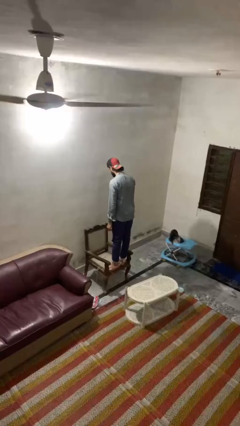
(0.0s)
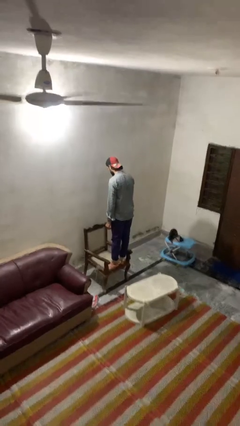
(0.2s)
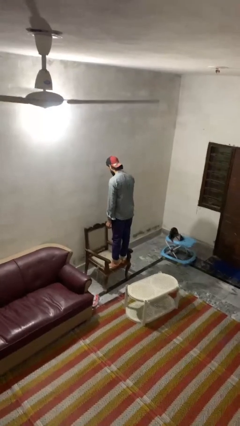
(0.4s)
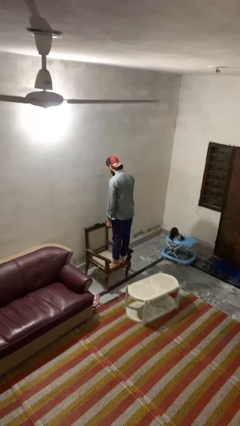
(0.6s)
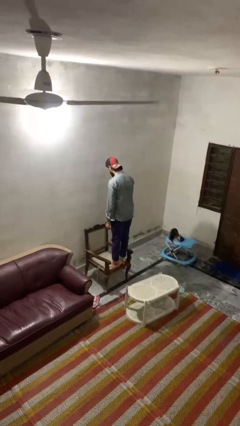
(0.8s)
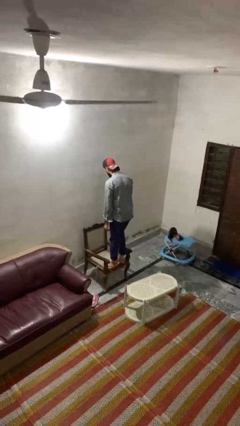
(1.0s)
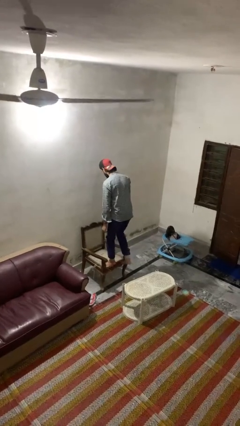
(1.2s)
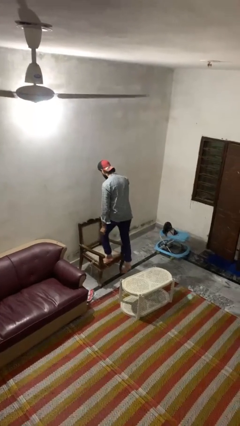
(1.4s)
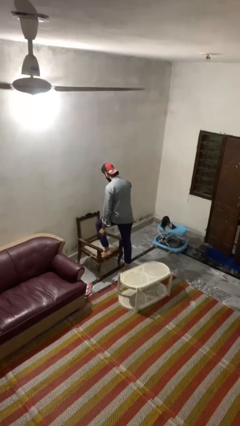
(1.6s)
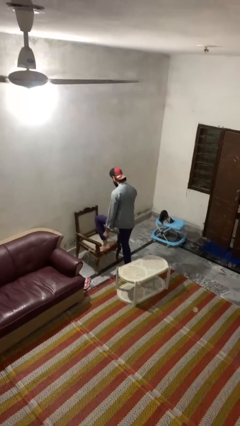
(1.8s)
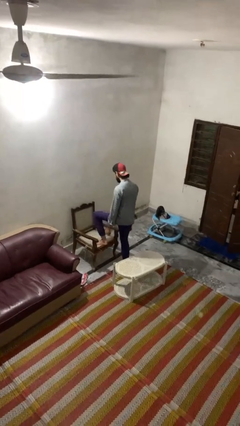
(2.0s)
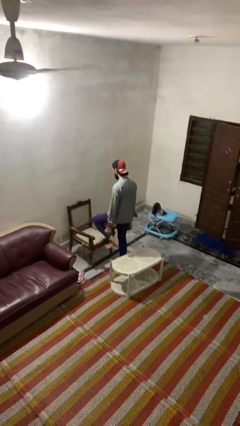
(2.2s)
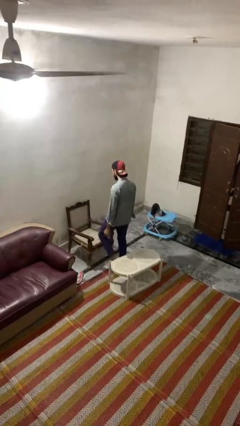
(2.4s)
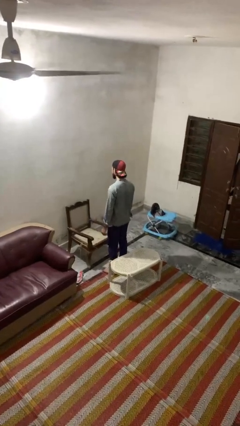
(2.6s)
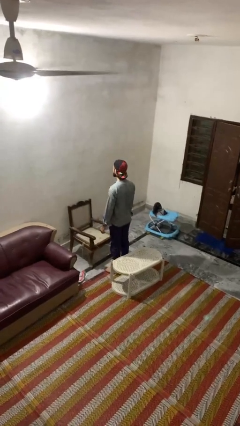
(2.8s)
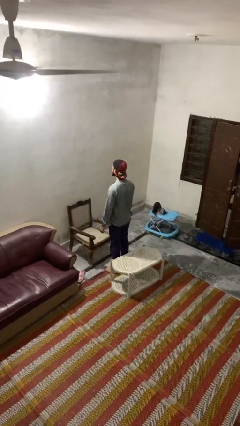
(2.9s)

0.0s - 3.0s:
person climbs off chair

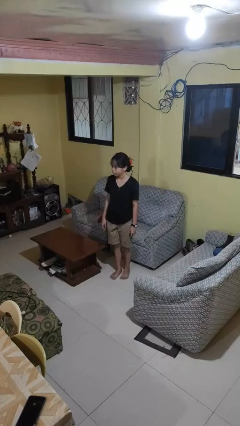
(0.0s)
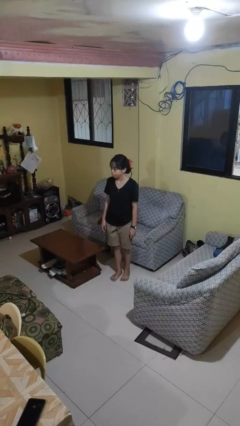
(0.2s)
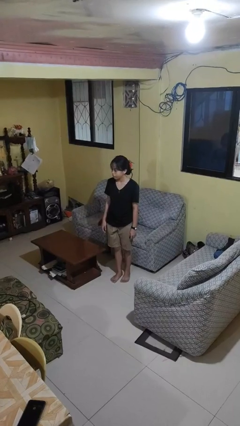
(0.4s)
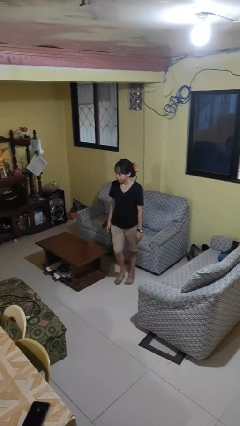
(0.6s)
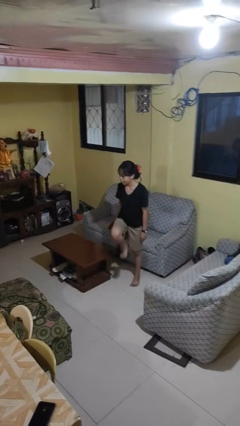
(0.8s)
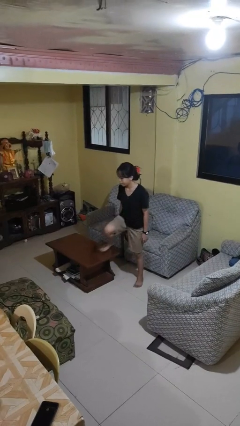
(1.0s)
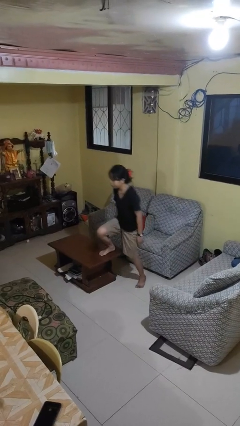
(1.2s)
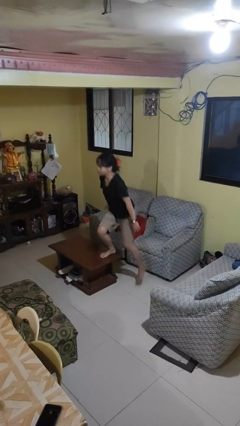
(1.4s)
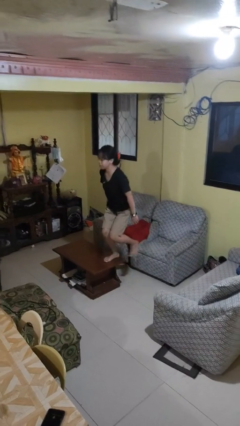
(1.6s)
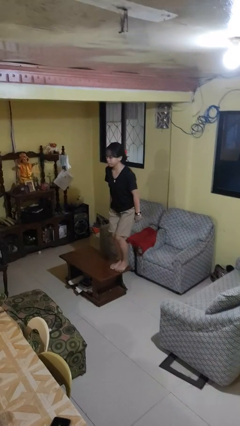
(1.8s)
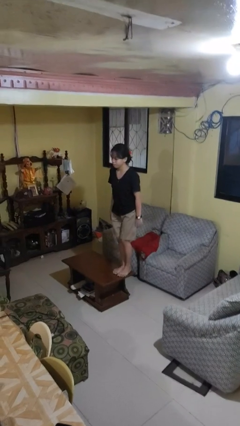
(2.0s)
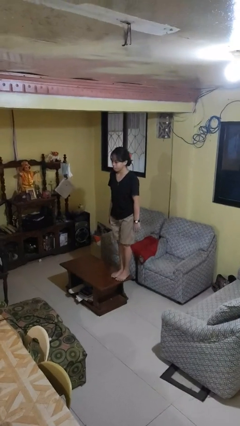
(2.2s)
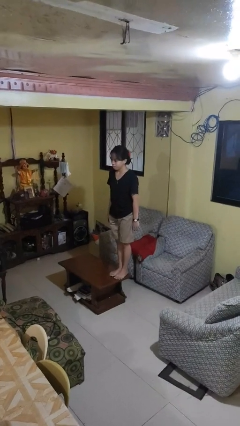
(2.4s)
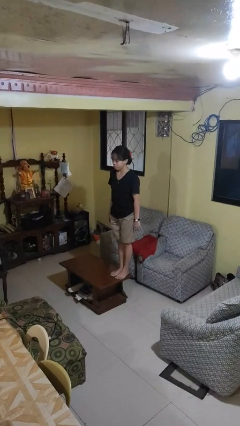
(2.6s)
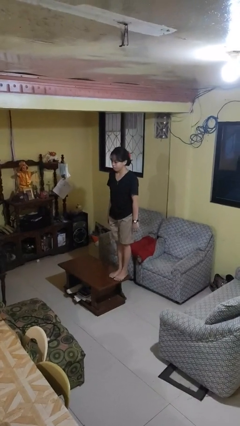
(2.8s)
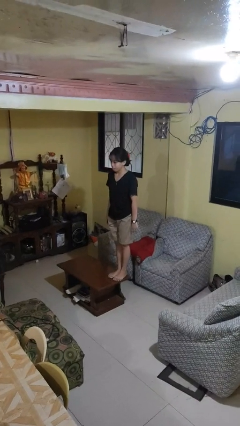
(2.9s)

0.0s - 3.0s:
person climbs on table

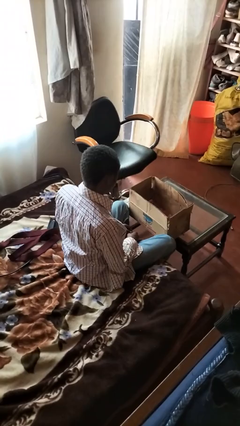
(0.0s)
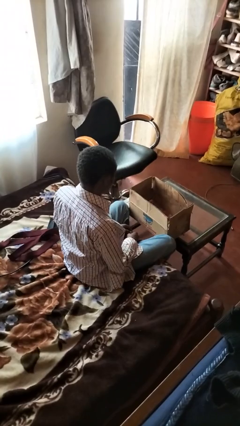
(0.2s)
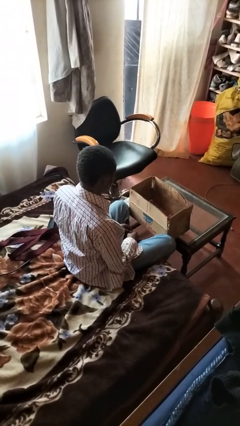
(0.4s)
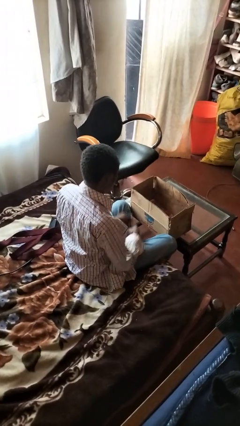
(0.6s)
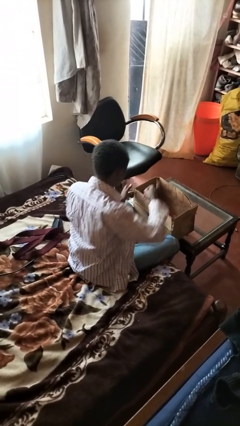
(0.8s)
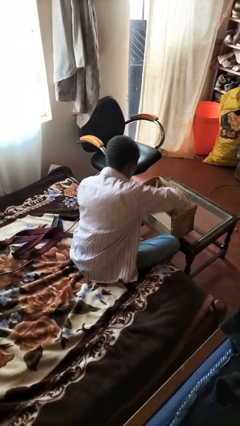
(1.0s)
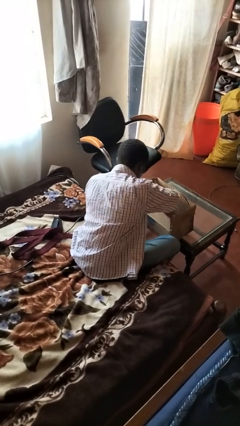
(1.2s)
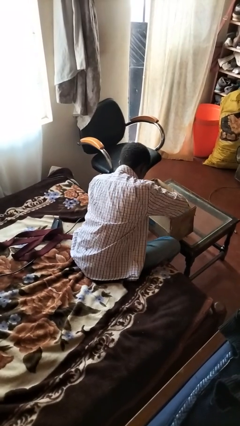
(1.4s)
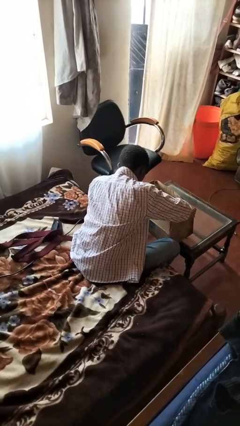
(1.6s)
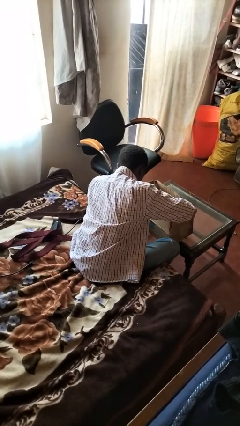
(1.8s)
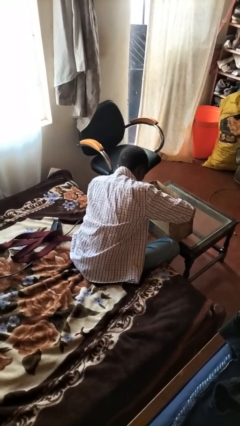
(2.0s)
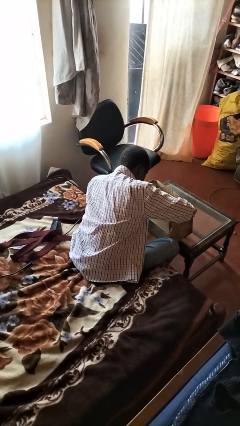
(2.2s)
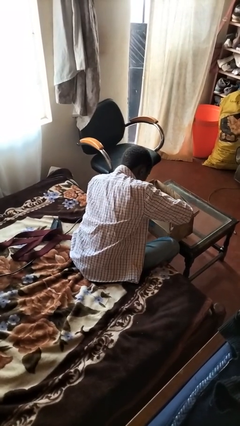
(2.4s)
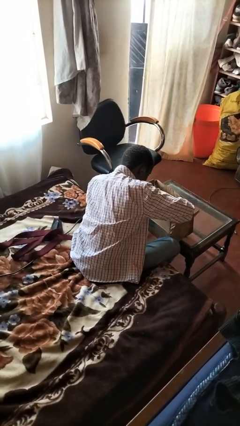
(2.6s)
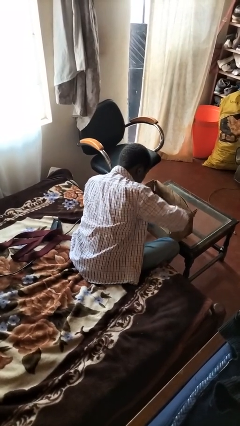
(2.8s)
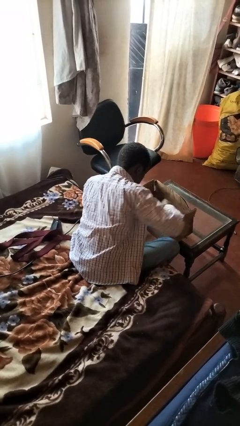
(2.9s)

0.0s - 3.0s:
person searches in box

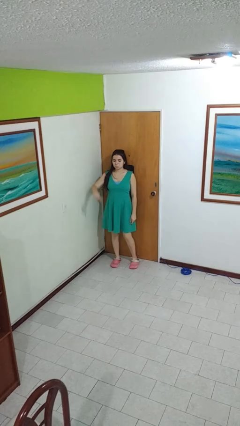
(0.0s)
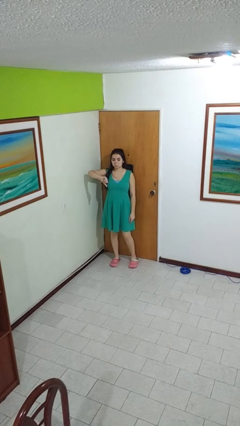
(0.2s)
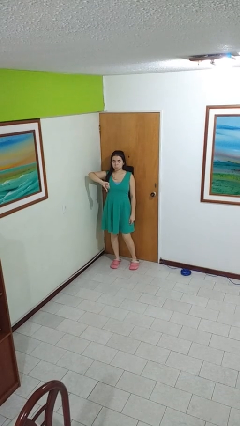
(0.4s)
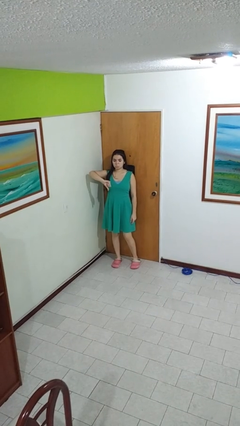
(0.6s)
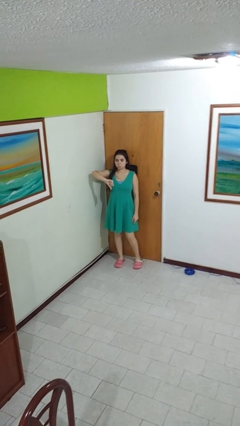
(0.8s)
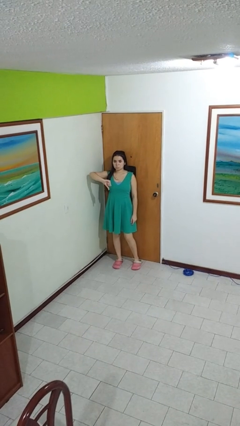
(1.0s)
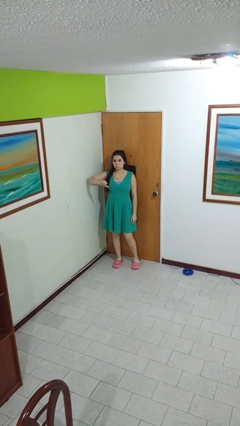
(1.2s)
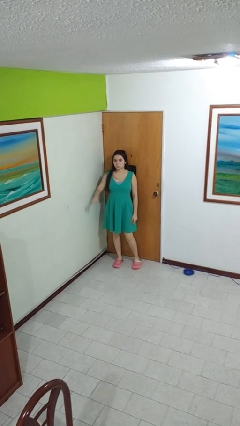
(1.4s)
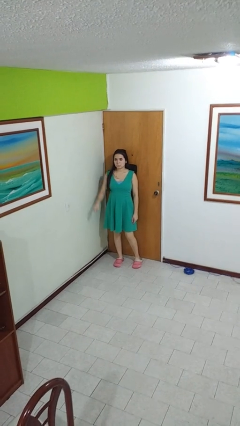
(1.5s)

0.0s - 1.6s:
person gestures thumbs down

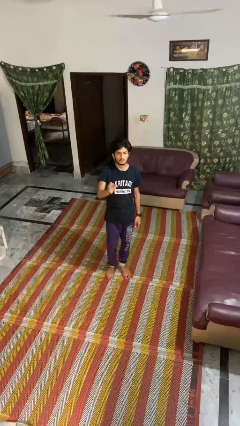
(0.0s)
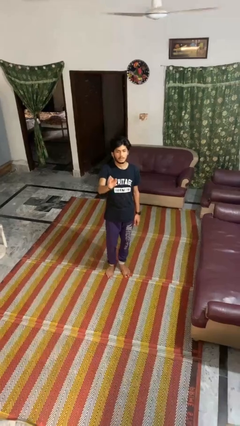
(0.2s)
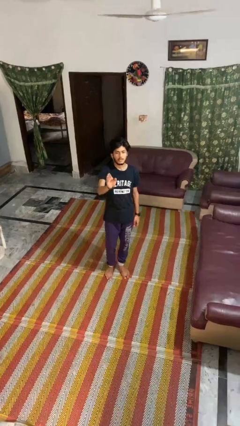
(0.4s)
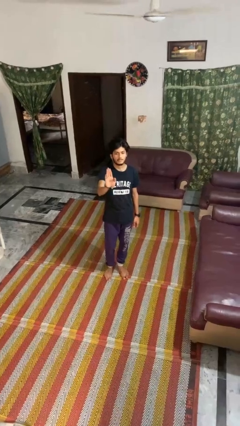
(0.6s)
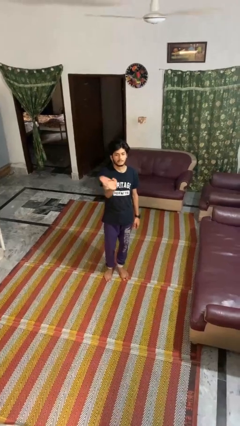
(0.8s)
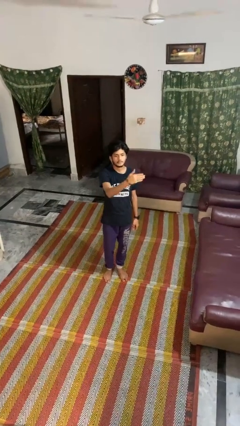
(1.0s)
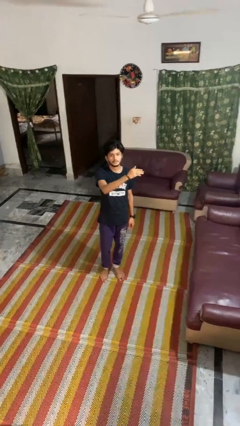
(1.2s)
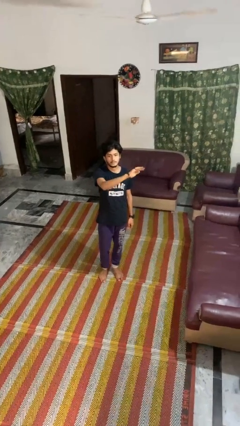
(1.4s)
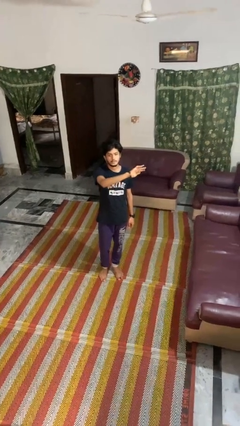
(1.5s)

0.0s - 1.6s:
person gestures swipe left

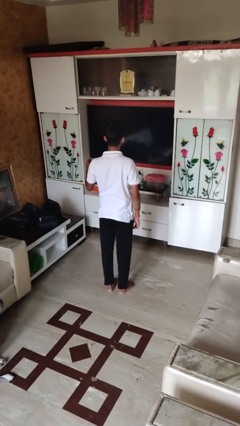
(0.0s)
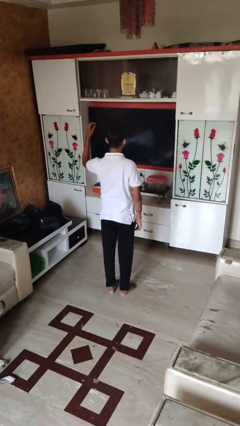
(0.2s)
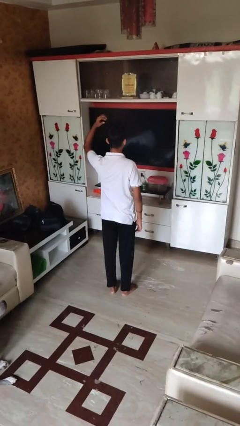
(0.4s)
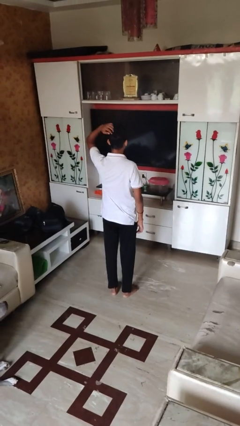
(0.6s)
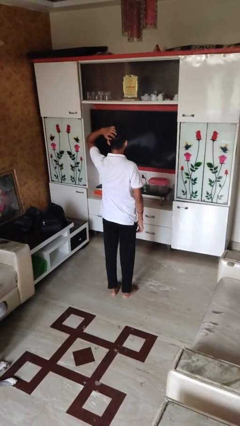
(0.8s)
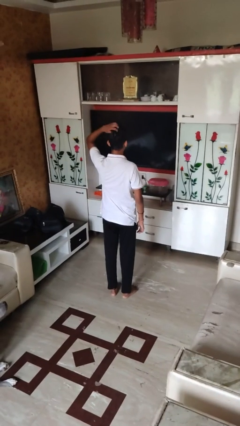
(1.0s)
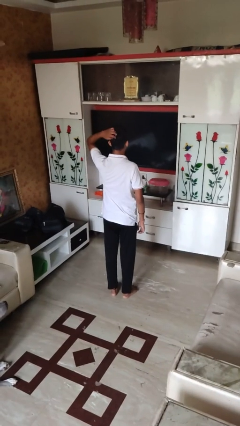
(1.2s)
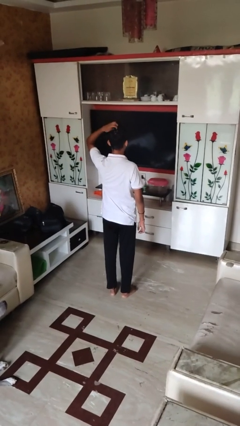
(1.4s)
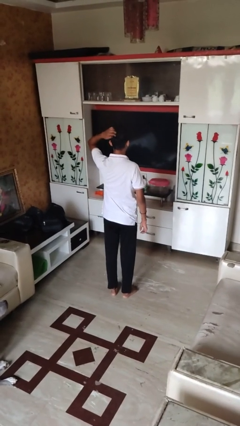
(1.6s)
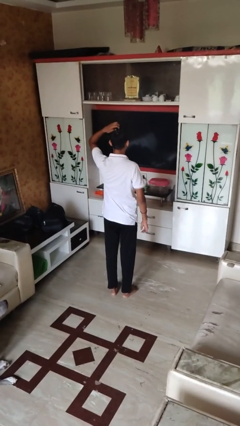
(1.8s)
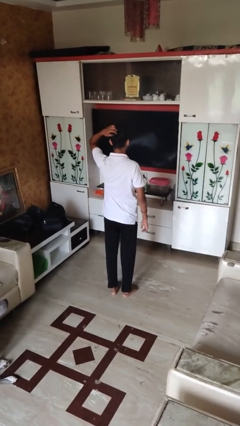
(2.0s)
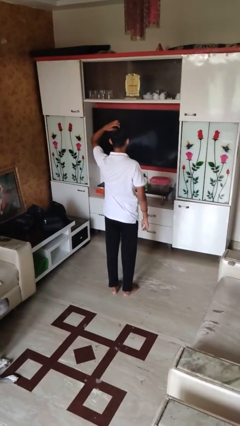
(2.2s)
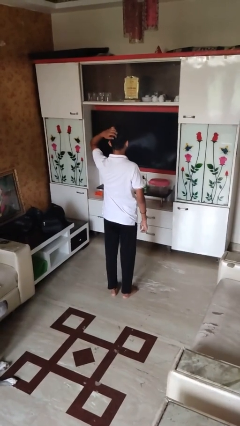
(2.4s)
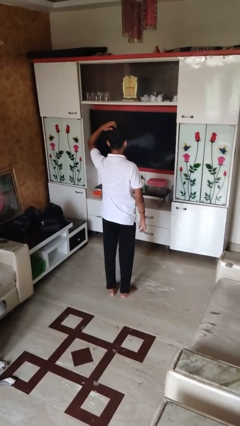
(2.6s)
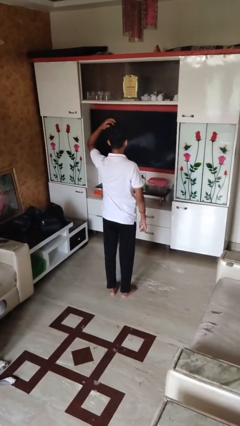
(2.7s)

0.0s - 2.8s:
person scratches face

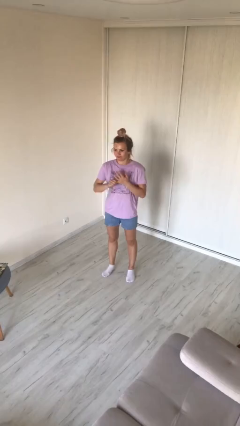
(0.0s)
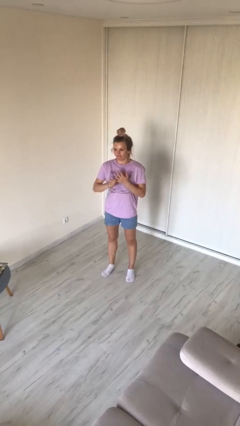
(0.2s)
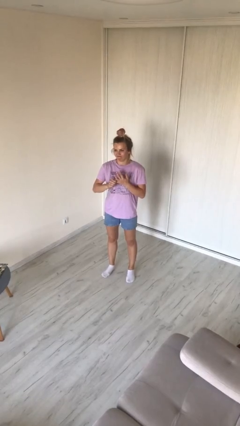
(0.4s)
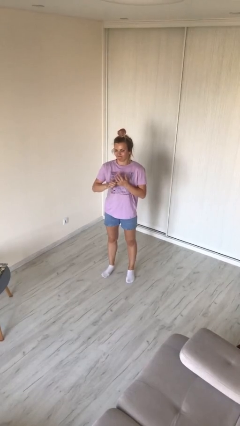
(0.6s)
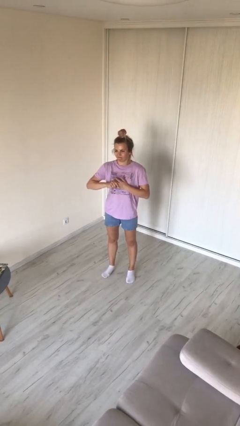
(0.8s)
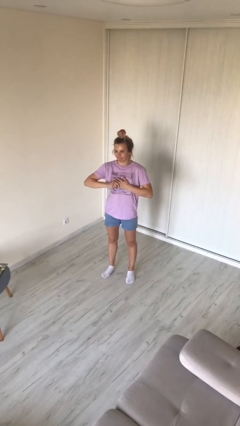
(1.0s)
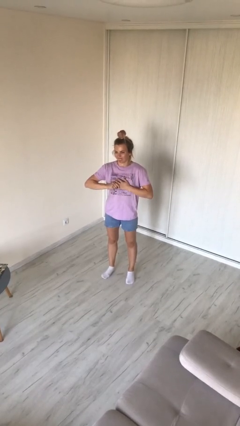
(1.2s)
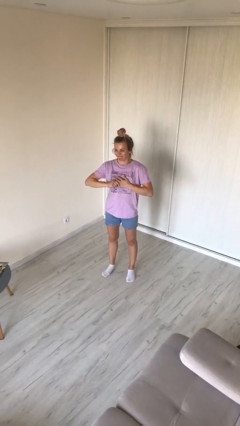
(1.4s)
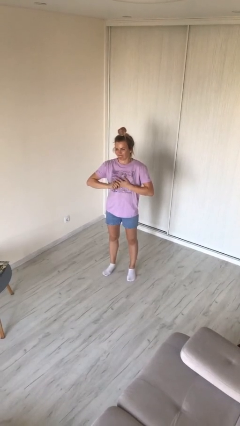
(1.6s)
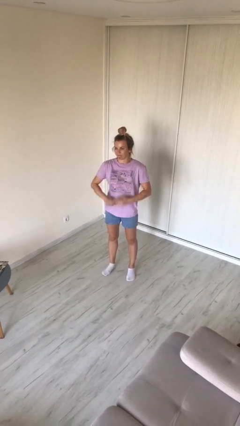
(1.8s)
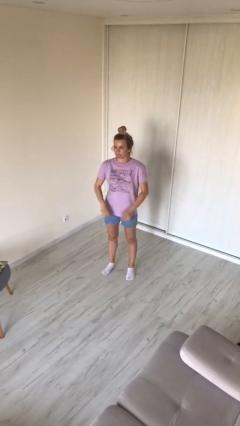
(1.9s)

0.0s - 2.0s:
person cracks knuckles
